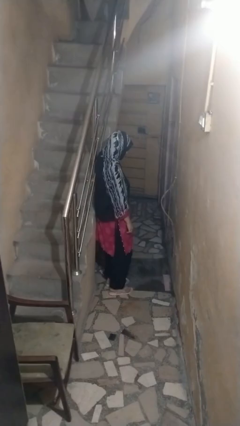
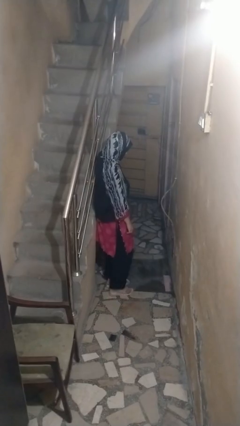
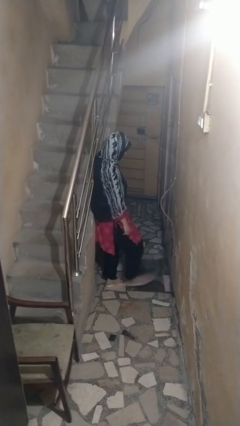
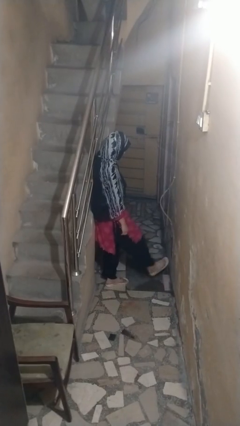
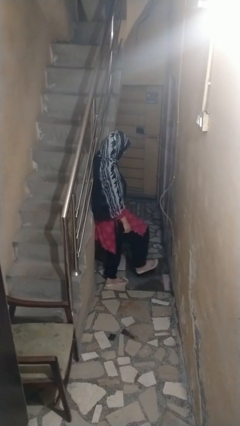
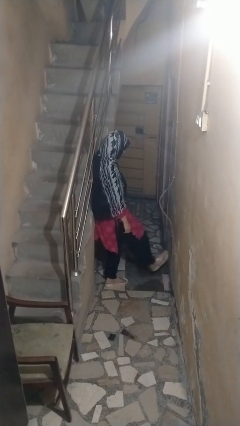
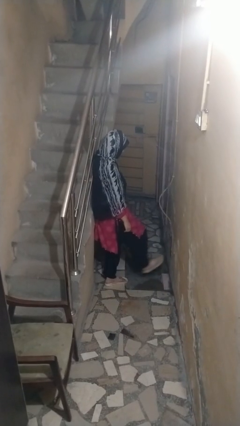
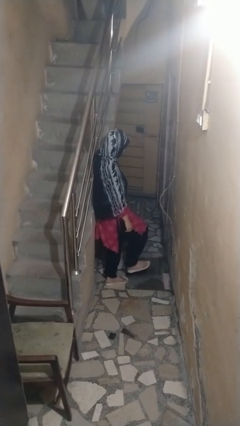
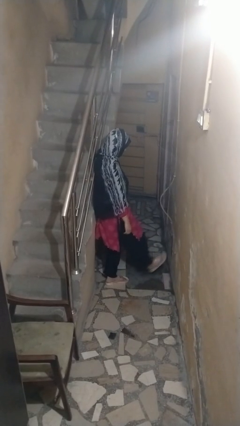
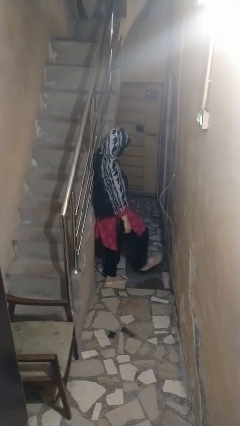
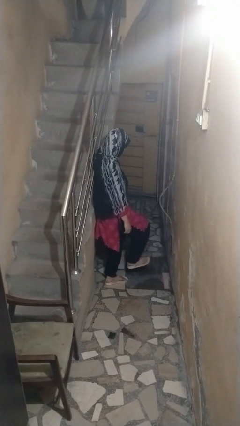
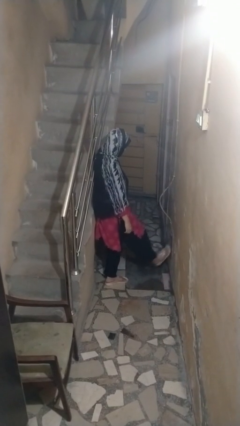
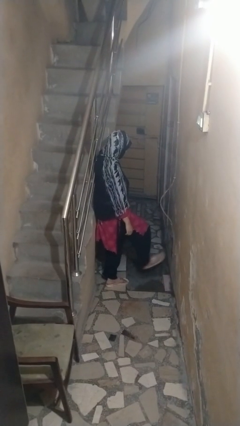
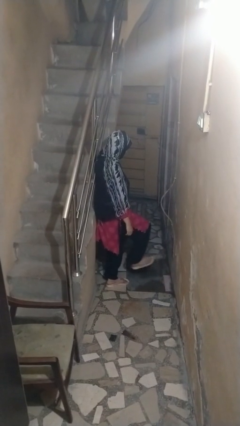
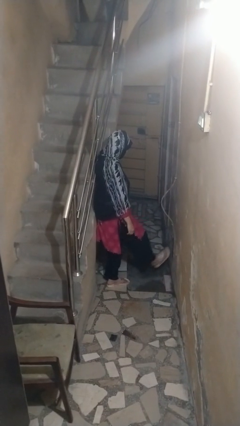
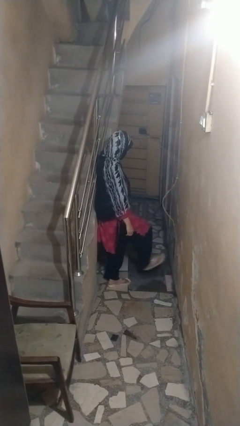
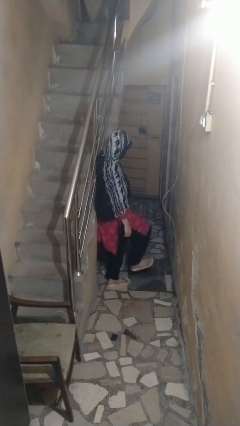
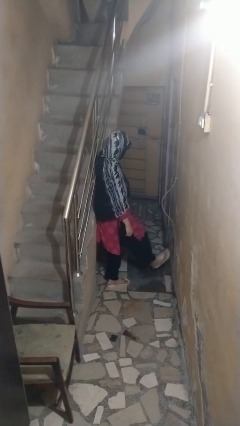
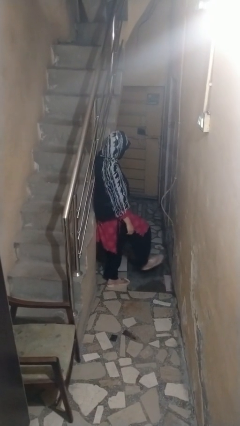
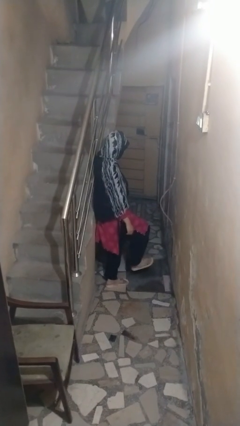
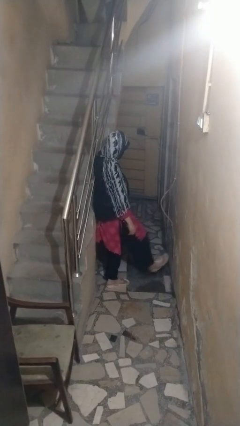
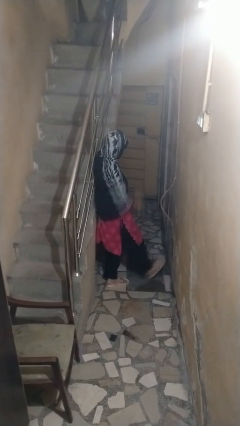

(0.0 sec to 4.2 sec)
person karate kicks

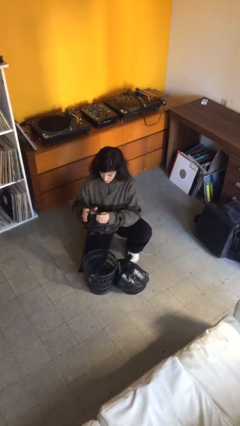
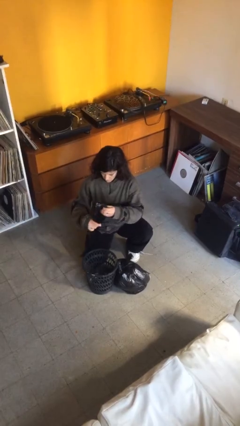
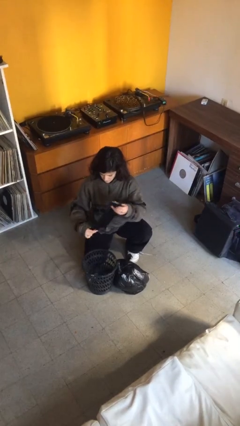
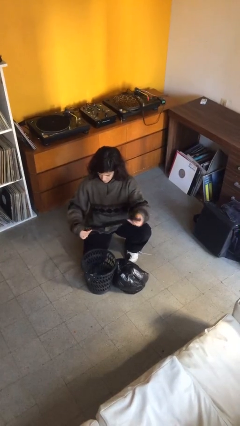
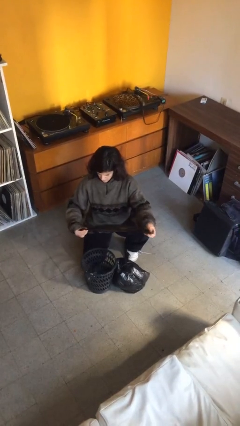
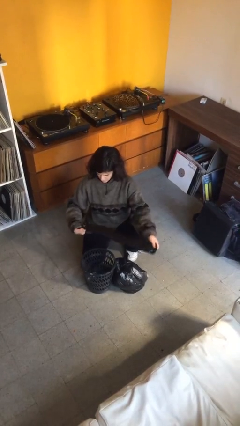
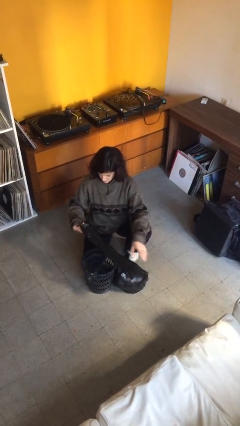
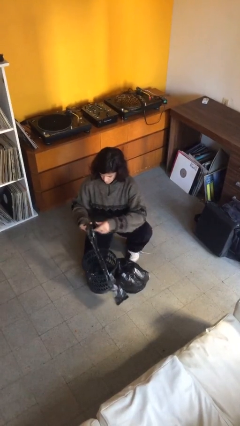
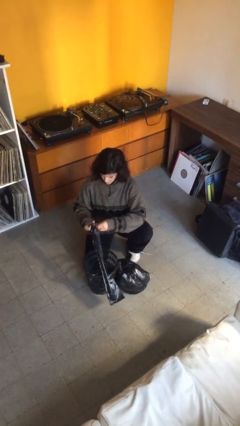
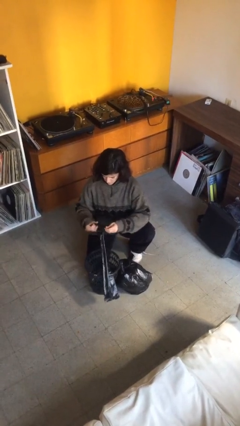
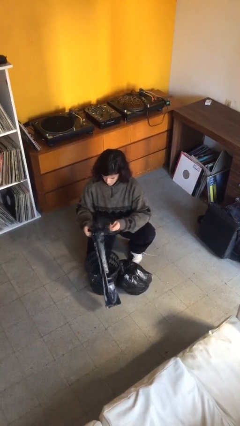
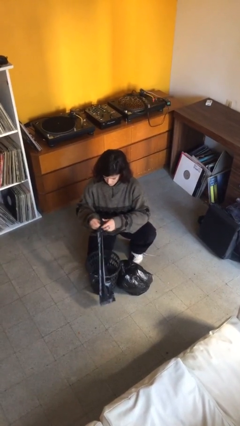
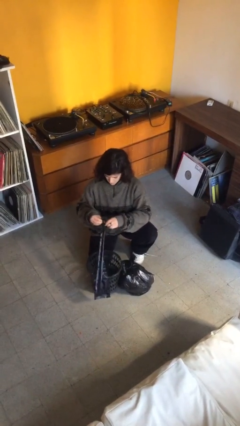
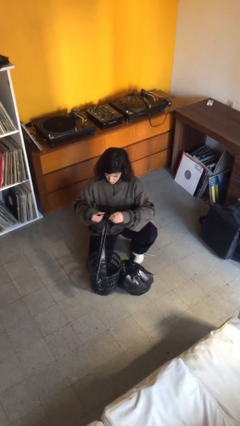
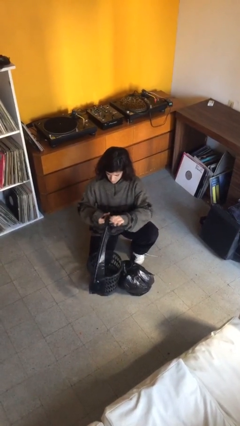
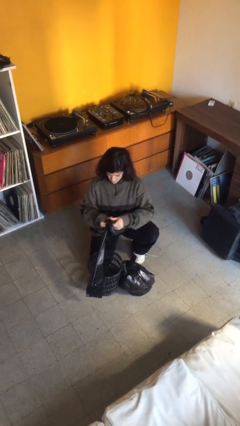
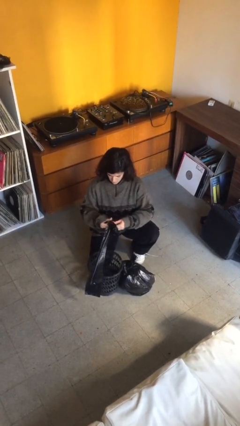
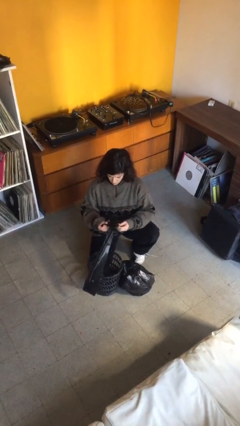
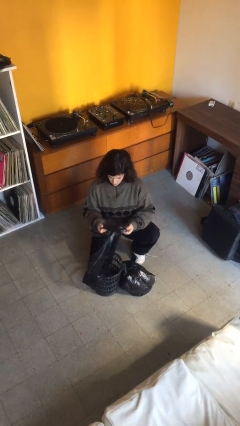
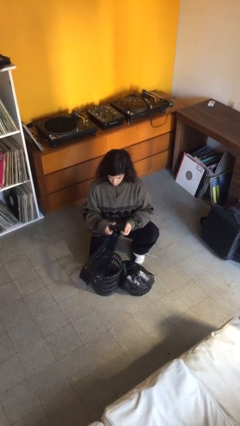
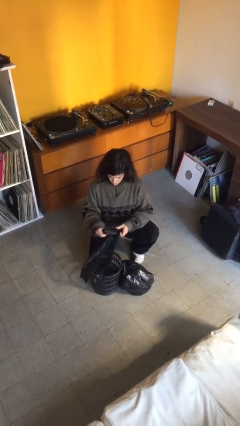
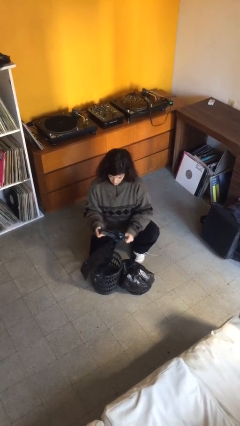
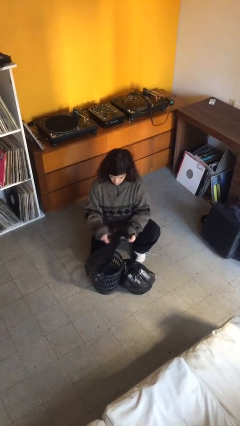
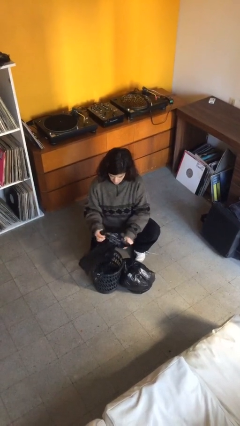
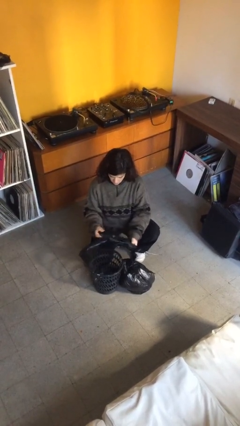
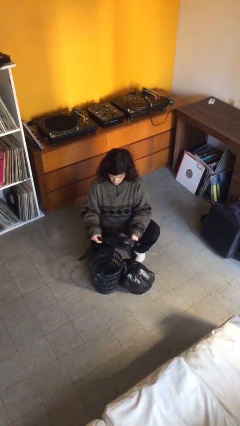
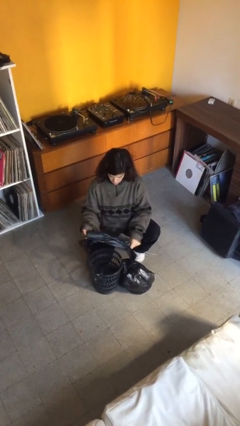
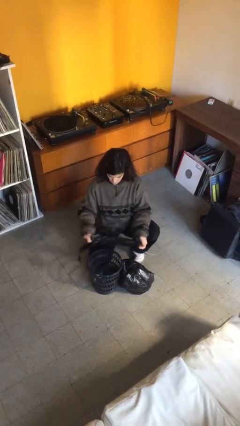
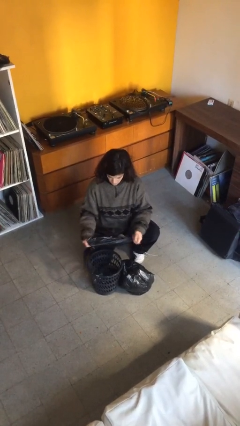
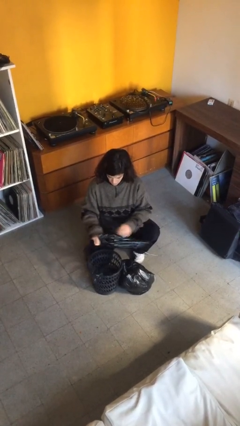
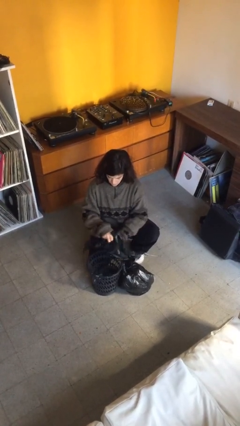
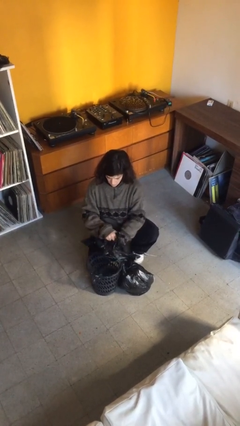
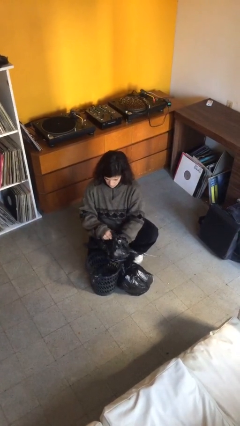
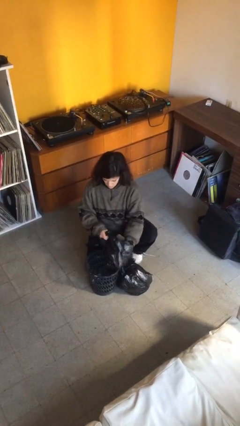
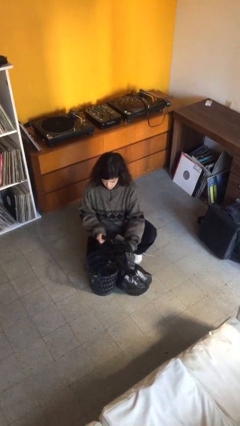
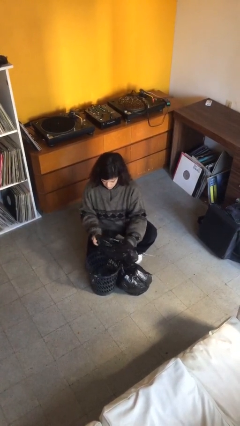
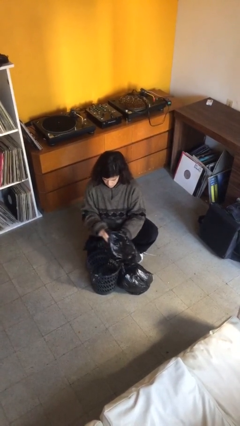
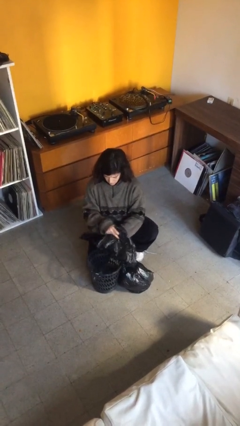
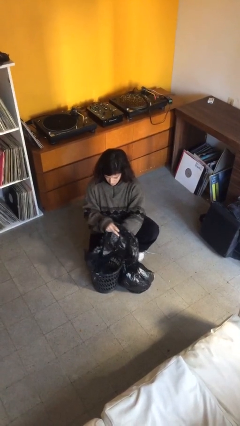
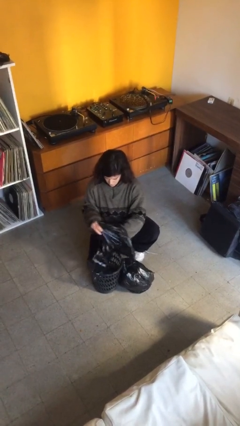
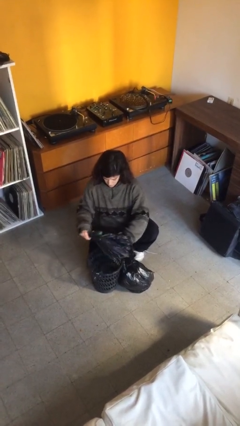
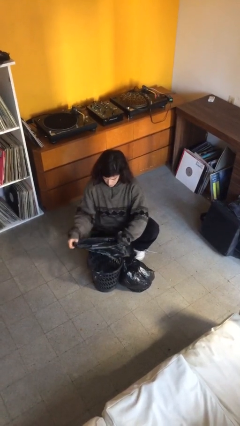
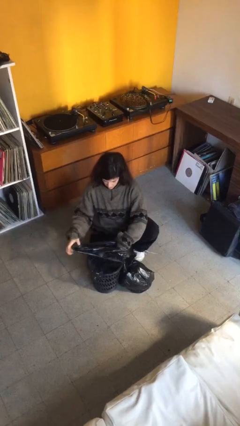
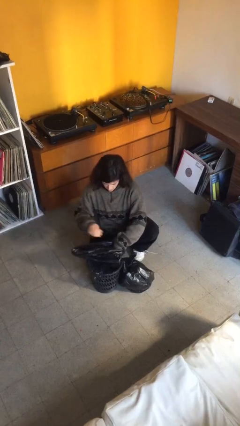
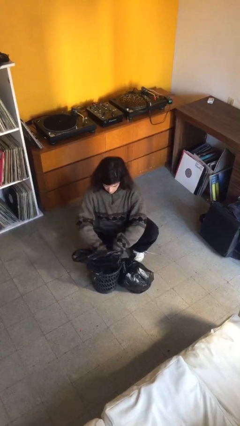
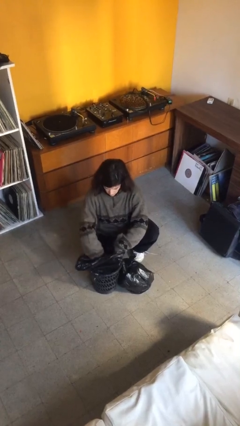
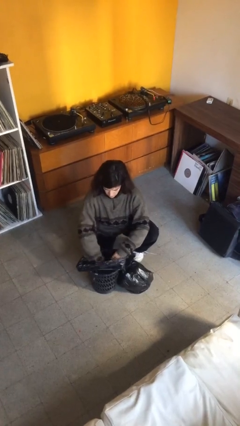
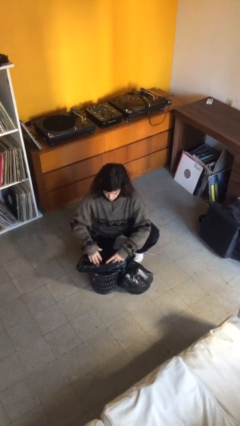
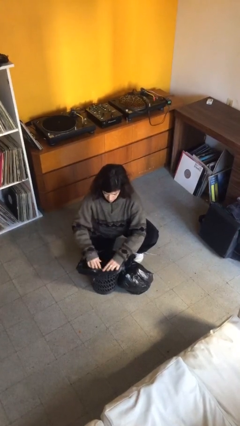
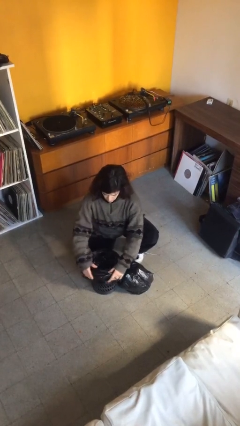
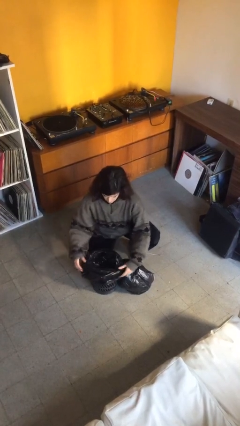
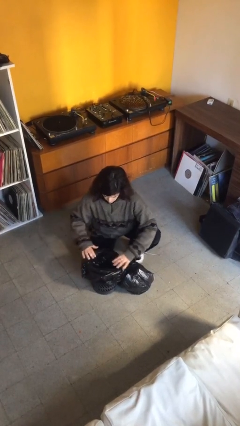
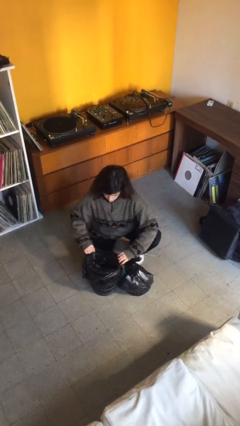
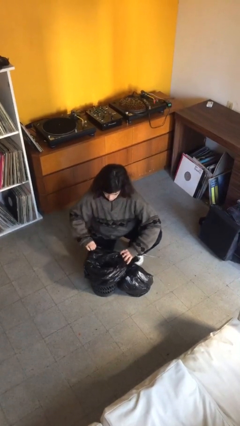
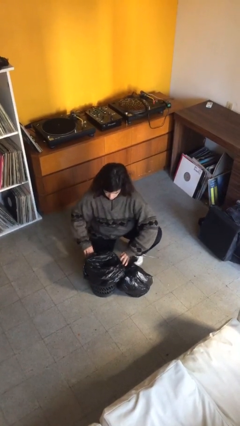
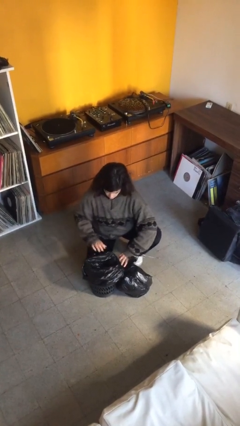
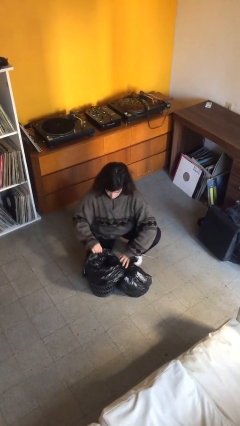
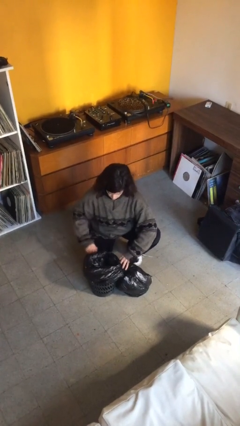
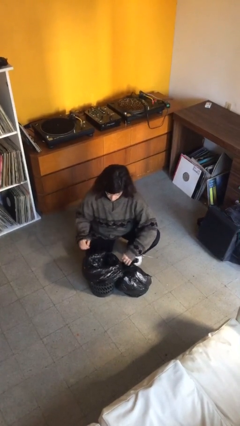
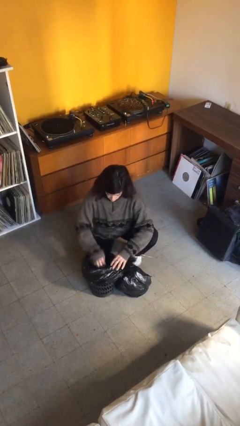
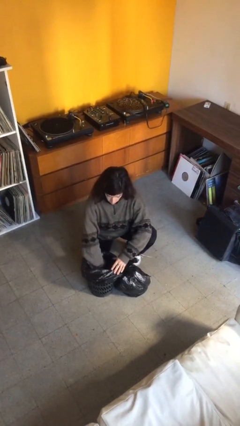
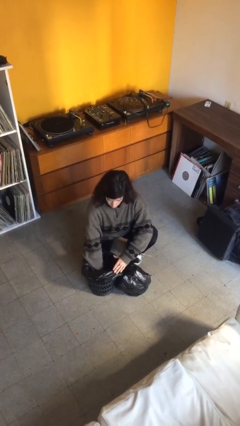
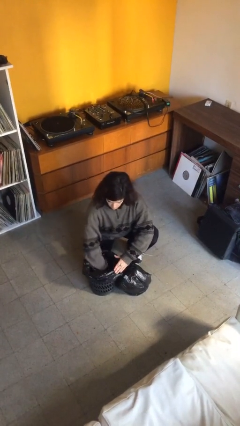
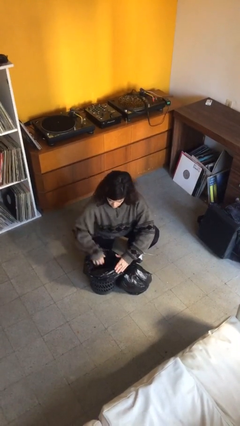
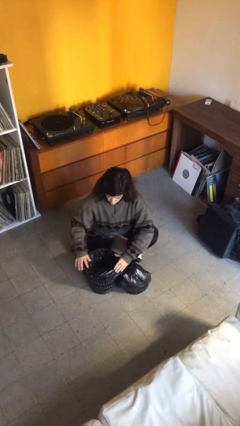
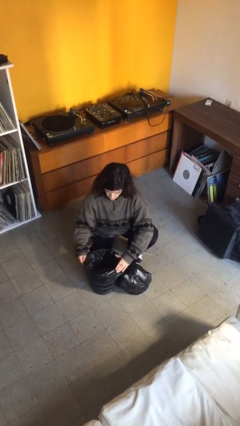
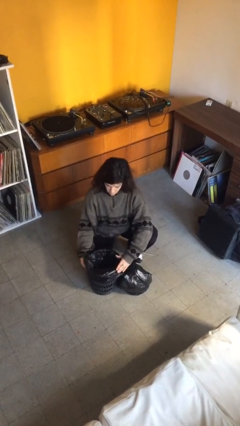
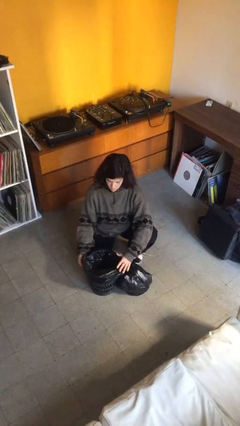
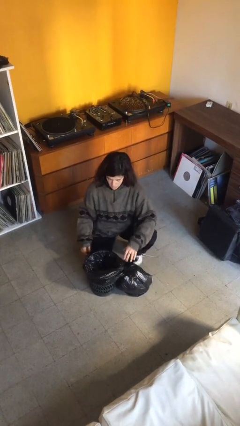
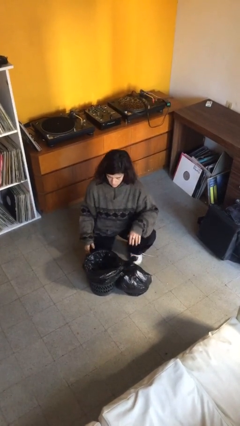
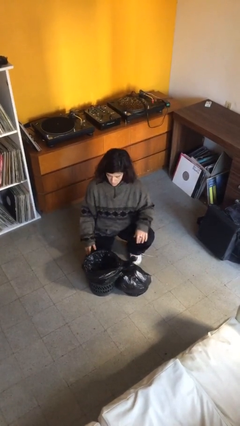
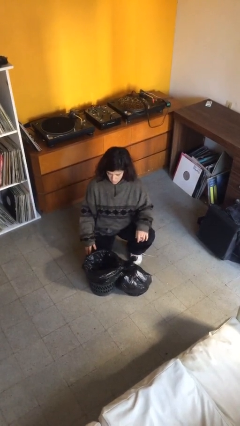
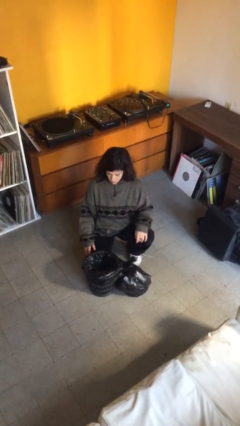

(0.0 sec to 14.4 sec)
person inserts trashbag into trashcan
